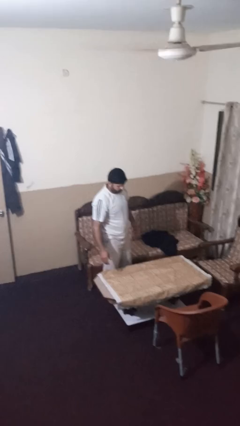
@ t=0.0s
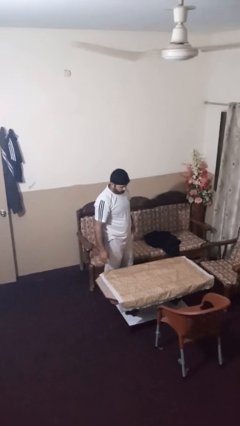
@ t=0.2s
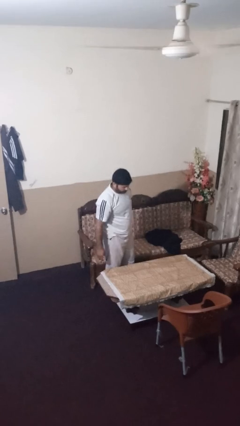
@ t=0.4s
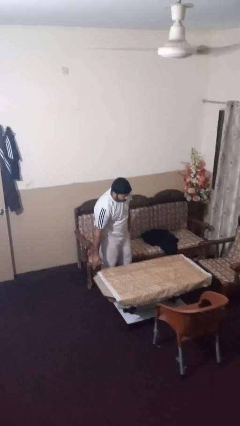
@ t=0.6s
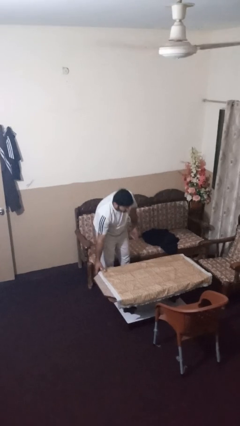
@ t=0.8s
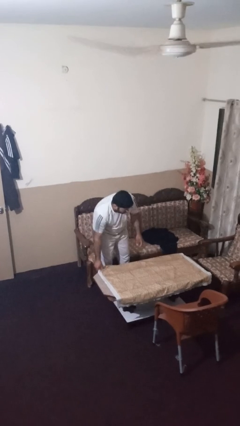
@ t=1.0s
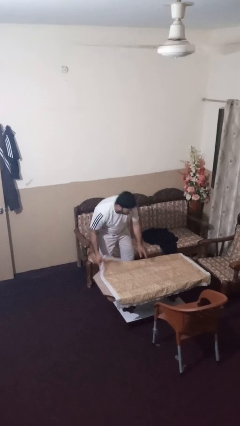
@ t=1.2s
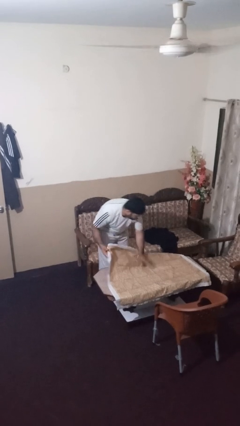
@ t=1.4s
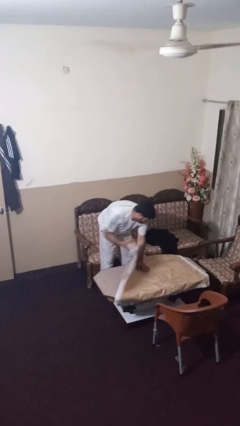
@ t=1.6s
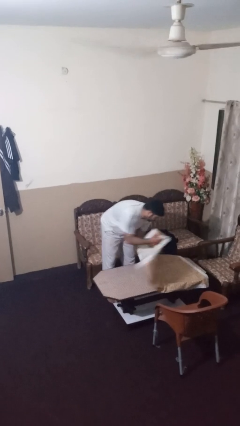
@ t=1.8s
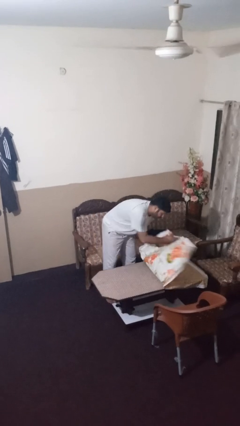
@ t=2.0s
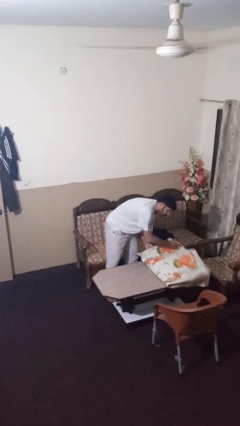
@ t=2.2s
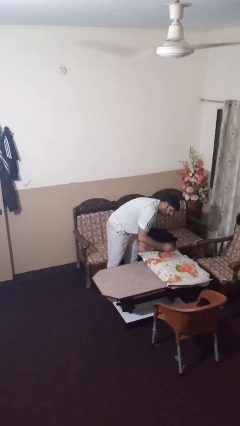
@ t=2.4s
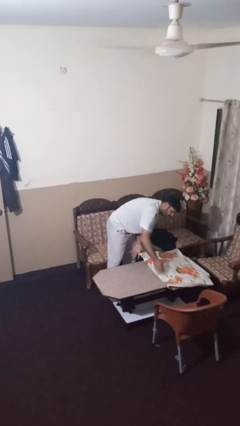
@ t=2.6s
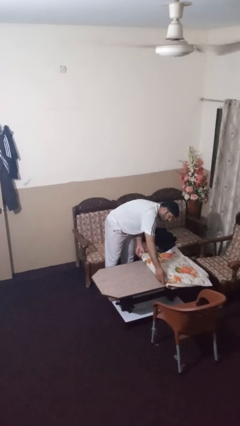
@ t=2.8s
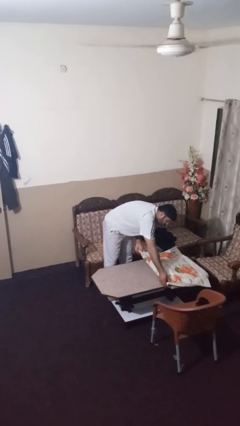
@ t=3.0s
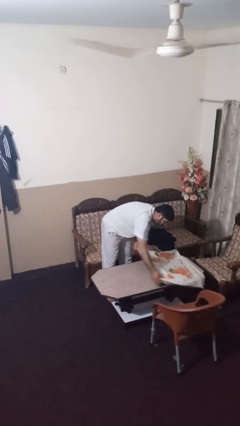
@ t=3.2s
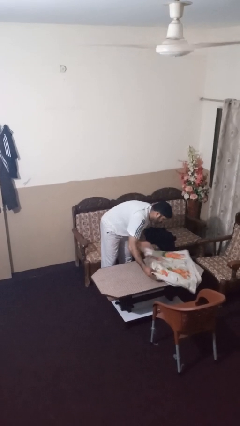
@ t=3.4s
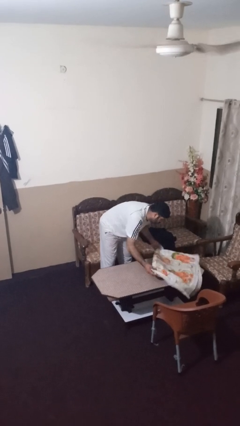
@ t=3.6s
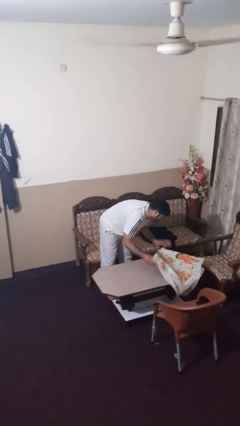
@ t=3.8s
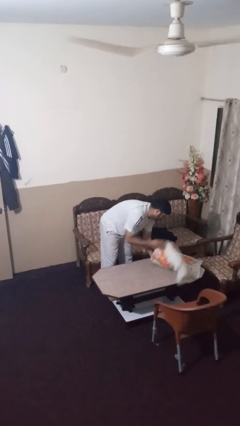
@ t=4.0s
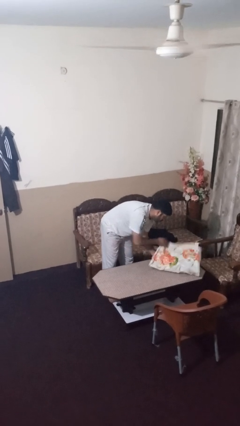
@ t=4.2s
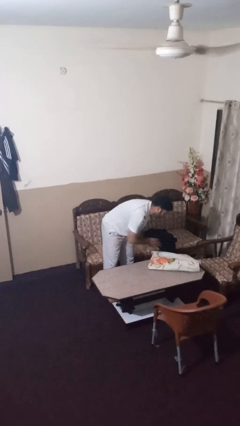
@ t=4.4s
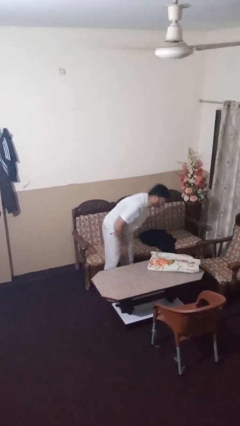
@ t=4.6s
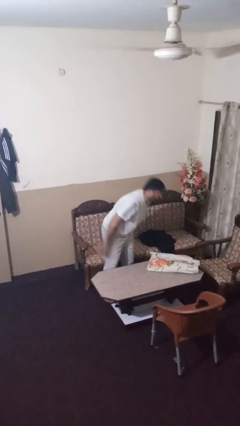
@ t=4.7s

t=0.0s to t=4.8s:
person folds tablecloth

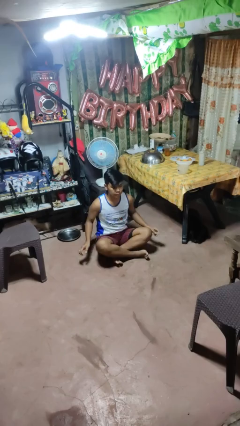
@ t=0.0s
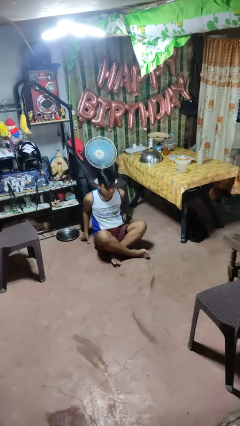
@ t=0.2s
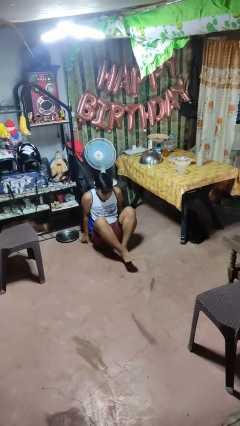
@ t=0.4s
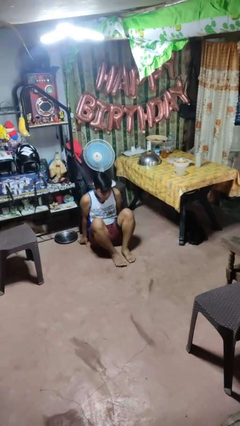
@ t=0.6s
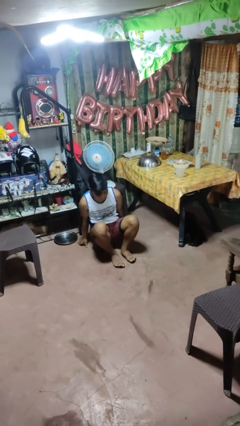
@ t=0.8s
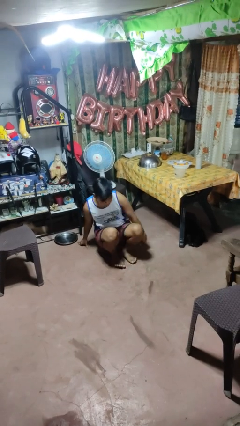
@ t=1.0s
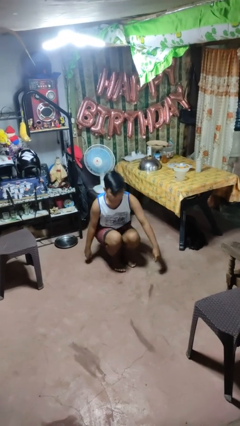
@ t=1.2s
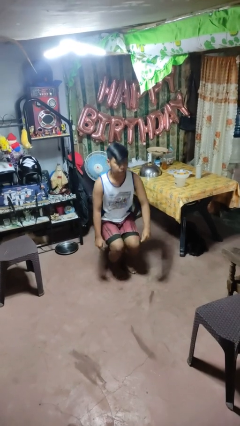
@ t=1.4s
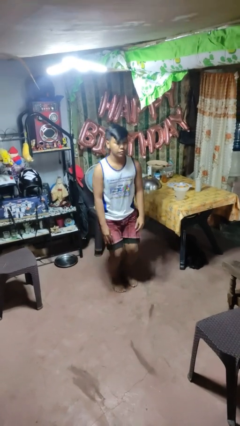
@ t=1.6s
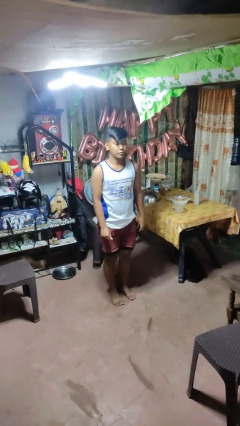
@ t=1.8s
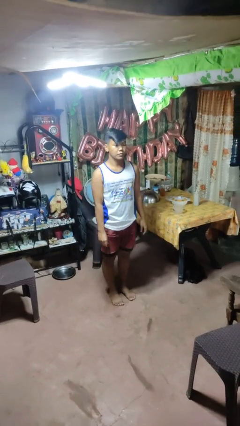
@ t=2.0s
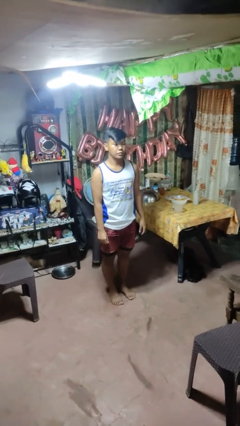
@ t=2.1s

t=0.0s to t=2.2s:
person stands up from floor

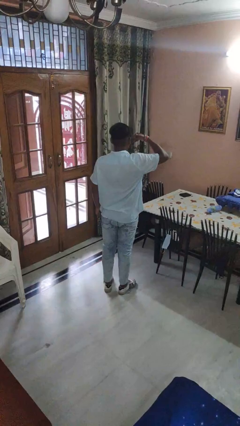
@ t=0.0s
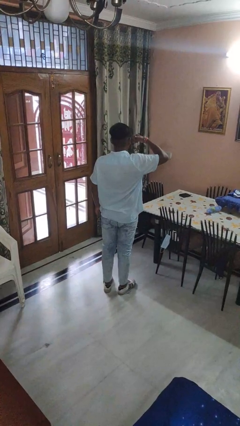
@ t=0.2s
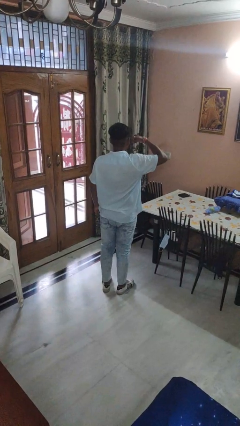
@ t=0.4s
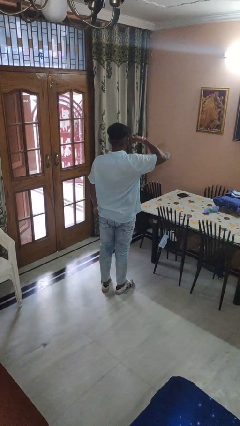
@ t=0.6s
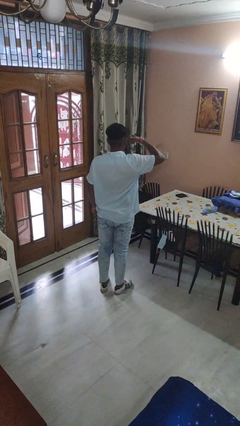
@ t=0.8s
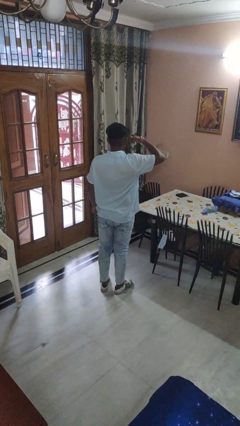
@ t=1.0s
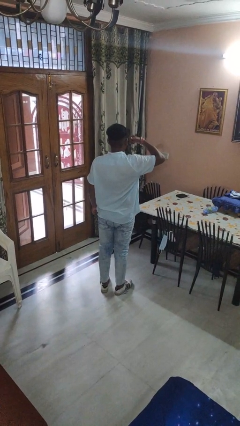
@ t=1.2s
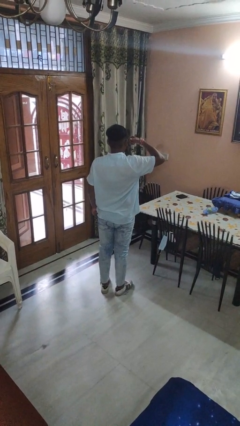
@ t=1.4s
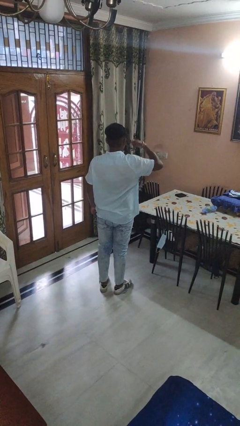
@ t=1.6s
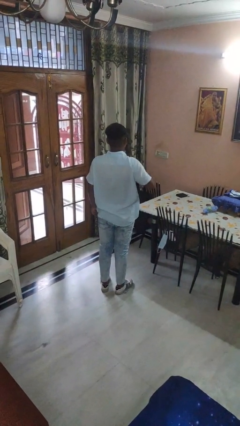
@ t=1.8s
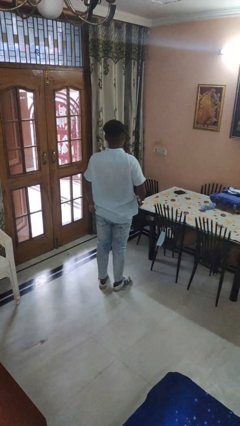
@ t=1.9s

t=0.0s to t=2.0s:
person gestures call me

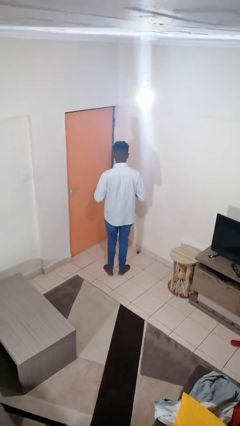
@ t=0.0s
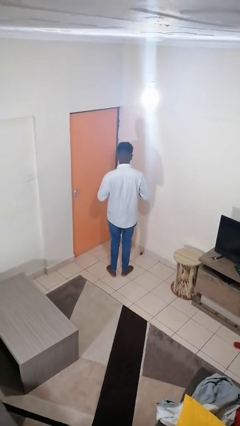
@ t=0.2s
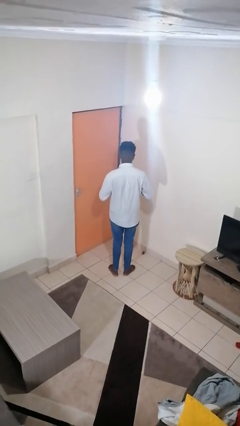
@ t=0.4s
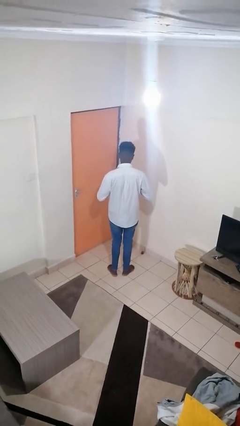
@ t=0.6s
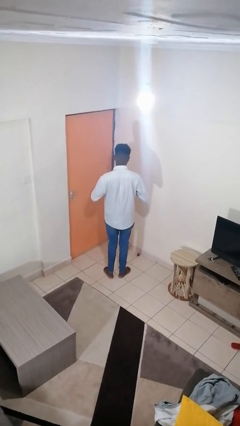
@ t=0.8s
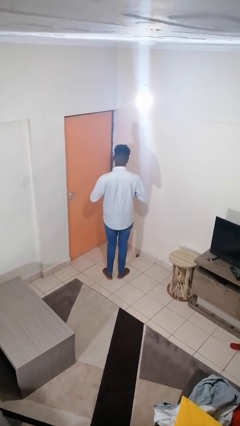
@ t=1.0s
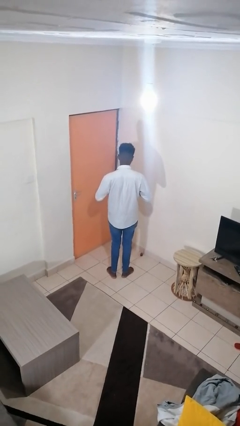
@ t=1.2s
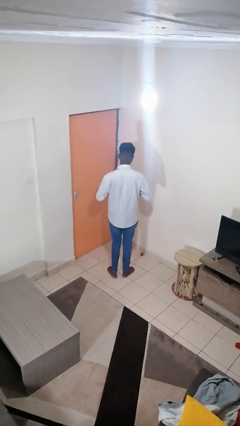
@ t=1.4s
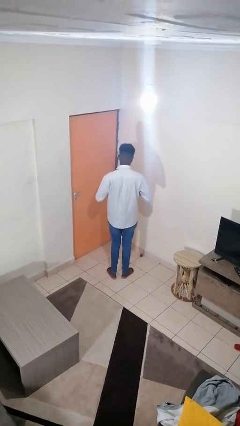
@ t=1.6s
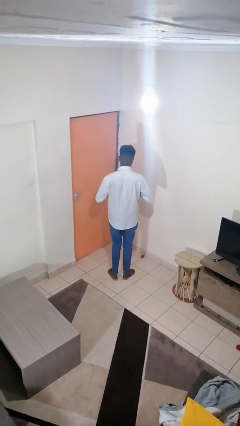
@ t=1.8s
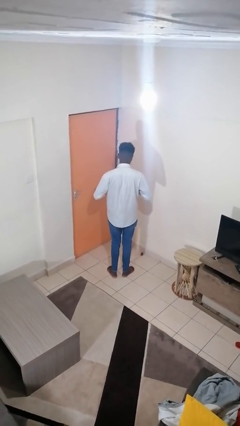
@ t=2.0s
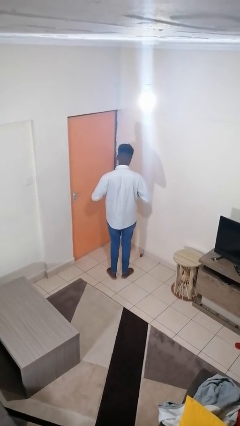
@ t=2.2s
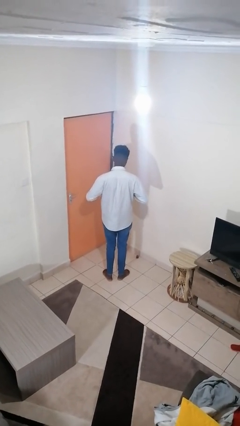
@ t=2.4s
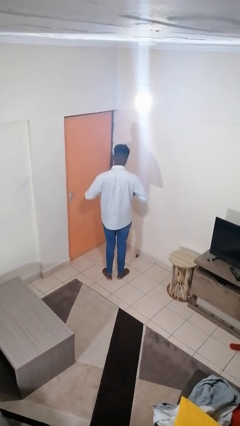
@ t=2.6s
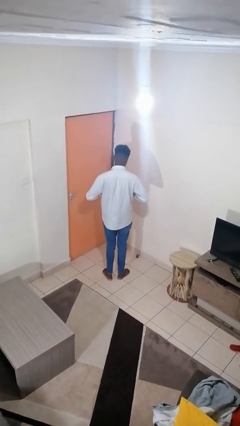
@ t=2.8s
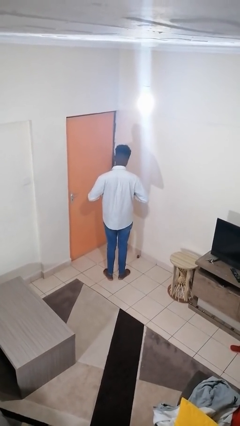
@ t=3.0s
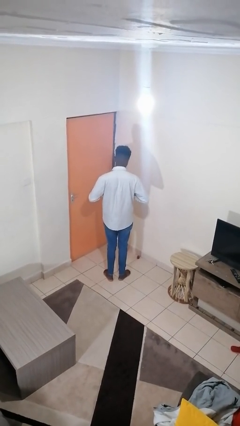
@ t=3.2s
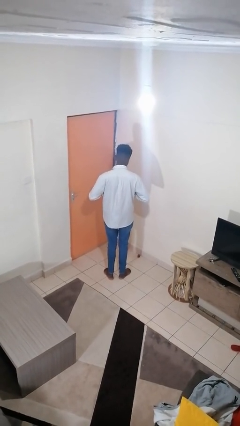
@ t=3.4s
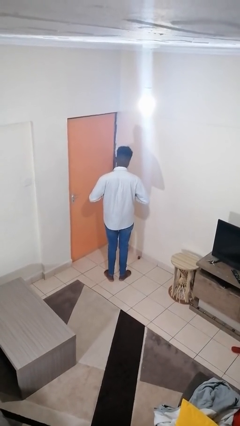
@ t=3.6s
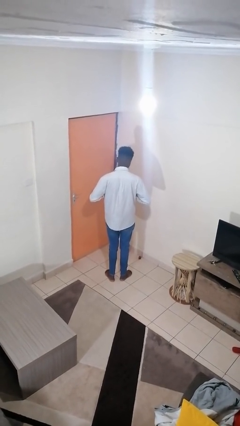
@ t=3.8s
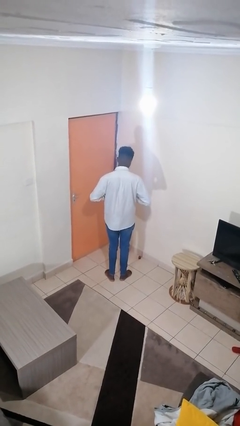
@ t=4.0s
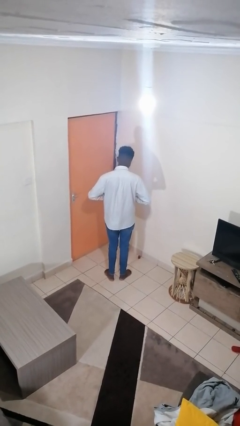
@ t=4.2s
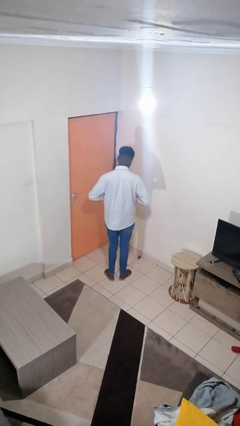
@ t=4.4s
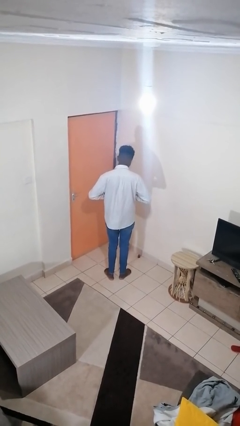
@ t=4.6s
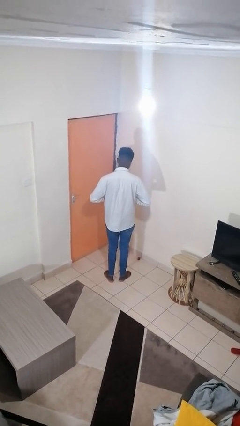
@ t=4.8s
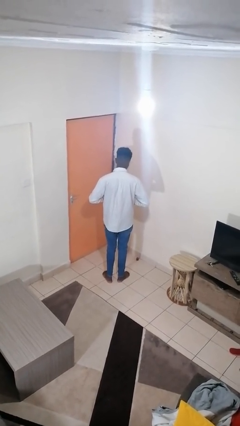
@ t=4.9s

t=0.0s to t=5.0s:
person buttons shirt

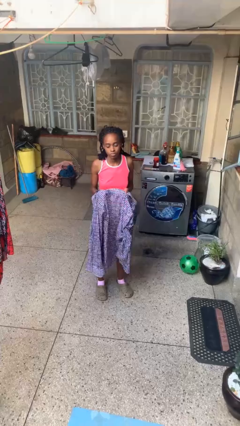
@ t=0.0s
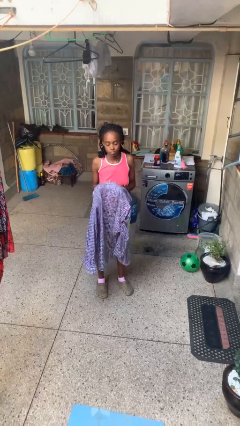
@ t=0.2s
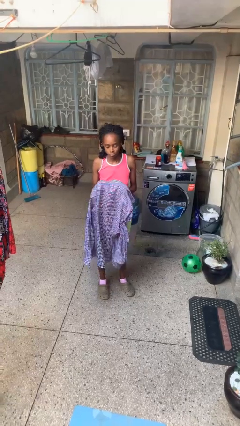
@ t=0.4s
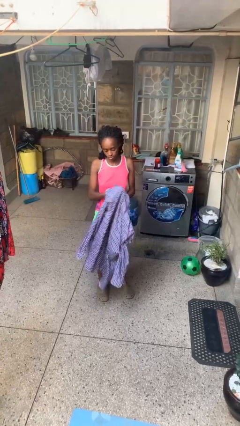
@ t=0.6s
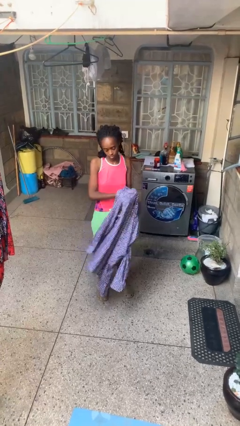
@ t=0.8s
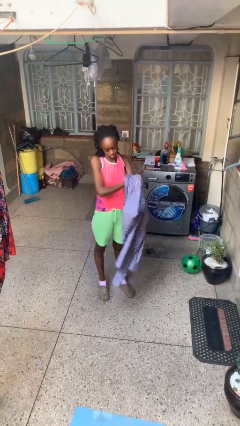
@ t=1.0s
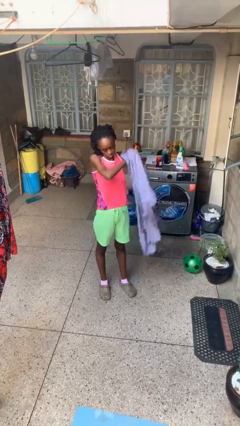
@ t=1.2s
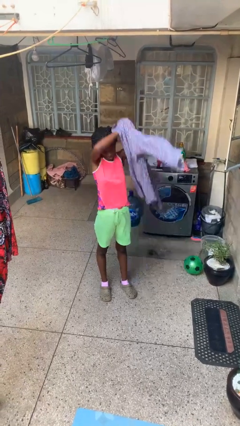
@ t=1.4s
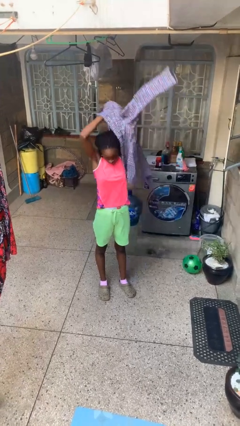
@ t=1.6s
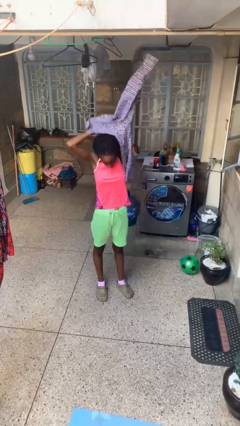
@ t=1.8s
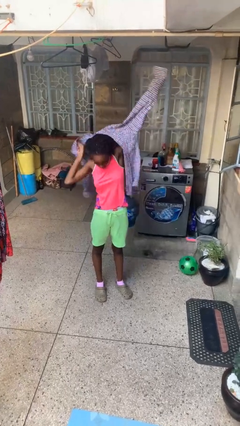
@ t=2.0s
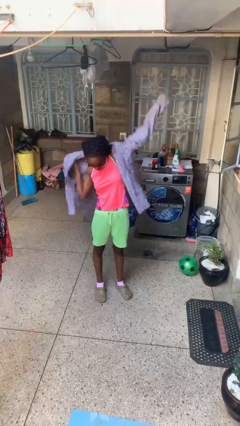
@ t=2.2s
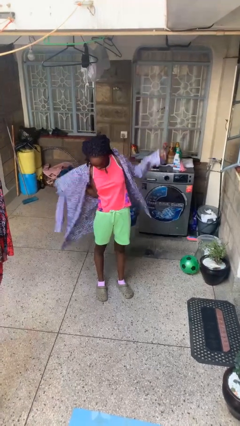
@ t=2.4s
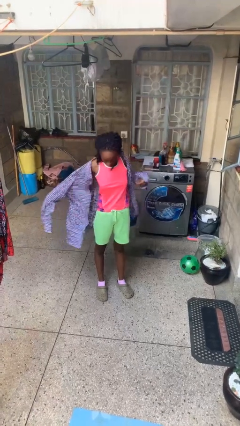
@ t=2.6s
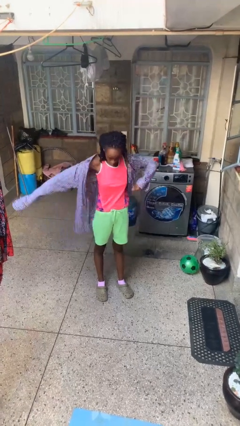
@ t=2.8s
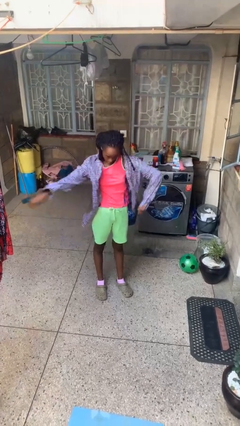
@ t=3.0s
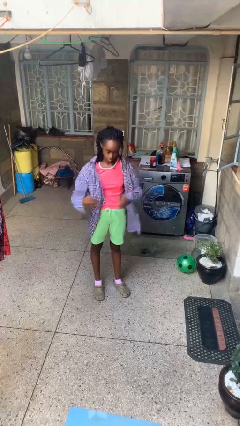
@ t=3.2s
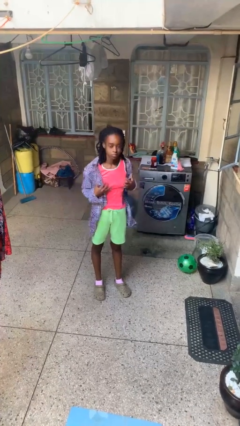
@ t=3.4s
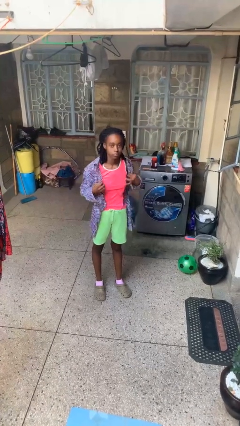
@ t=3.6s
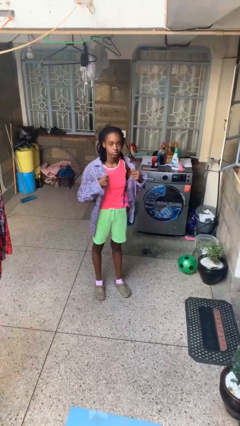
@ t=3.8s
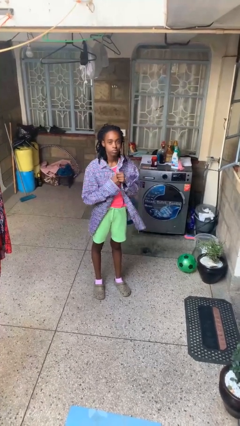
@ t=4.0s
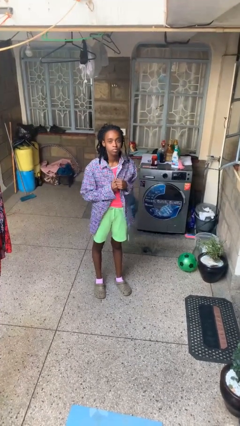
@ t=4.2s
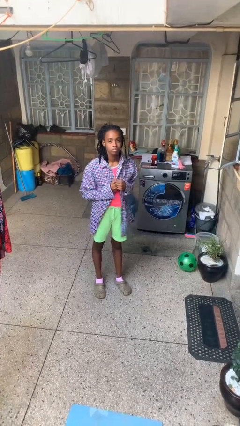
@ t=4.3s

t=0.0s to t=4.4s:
person puts on shirt
